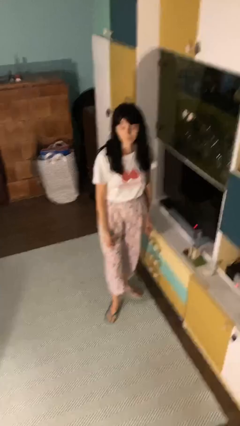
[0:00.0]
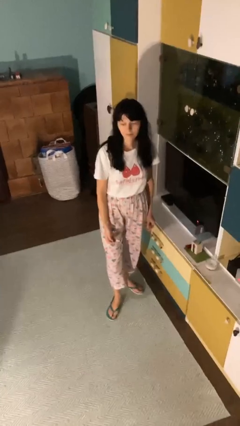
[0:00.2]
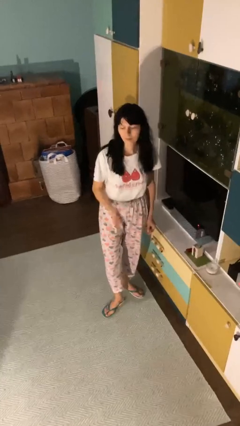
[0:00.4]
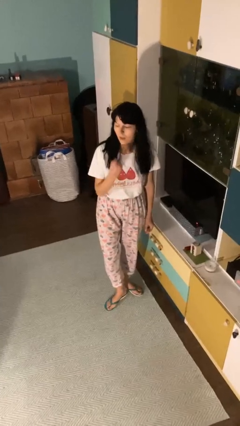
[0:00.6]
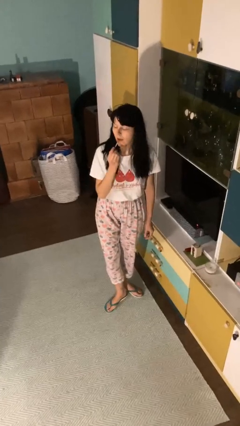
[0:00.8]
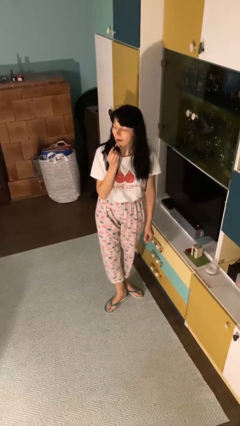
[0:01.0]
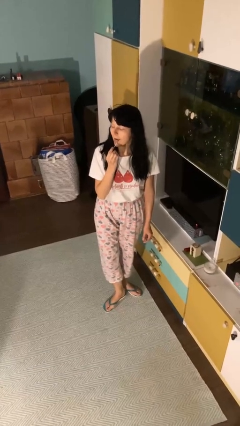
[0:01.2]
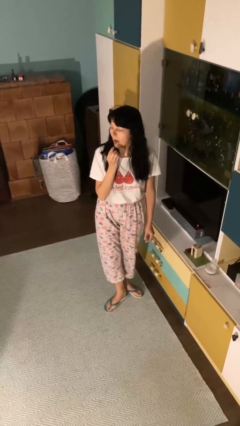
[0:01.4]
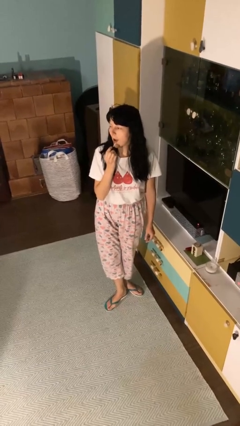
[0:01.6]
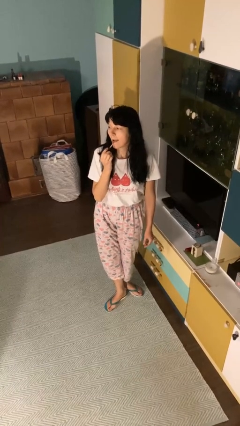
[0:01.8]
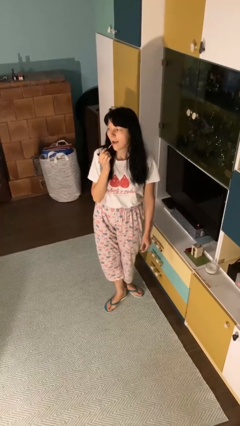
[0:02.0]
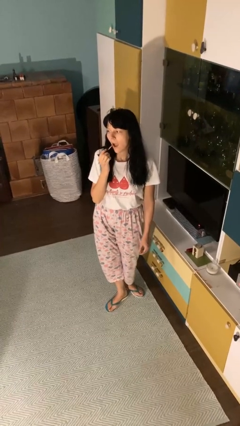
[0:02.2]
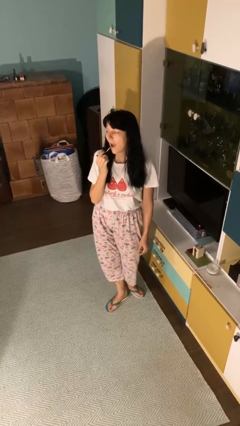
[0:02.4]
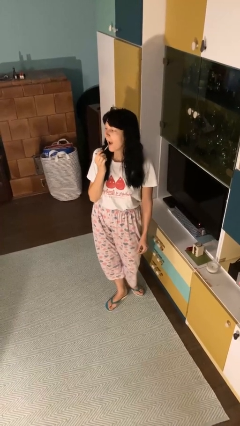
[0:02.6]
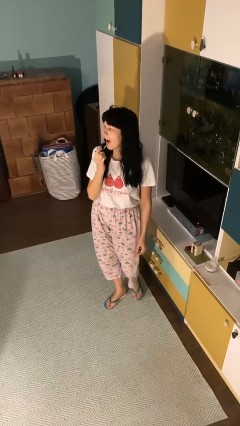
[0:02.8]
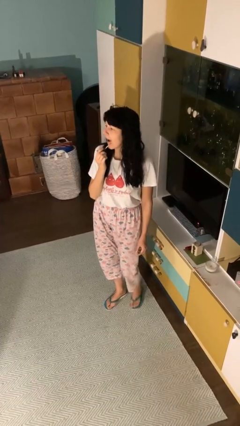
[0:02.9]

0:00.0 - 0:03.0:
person applies lip makeup

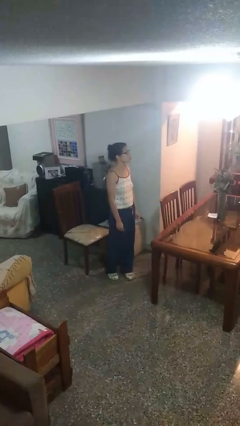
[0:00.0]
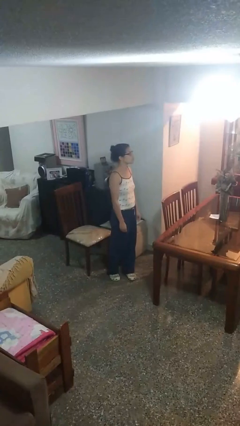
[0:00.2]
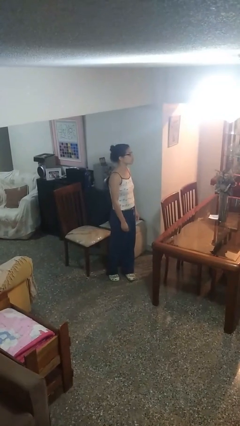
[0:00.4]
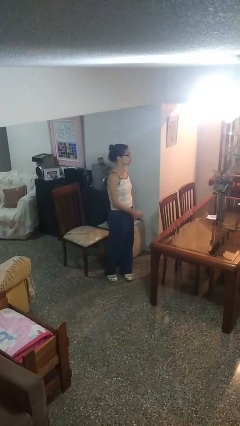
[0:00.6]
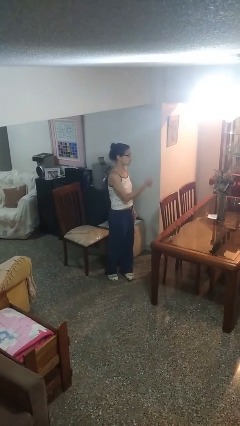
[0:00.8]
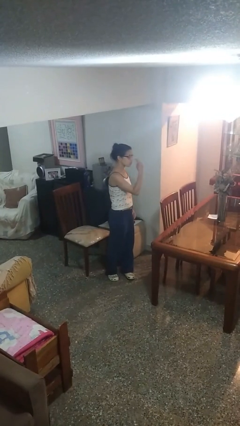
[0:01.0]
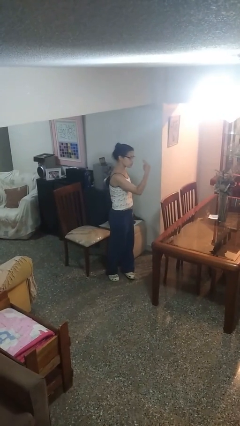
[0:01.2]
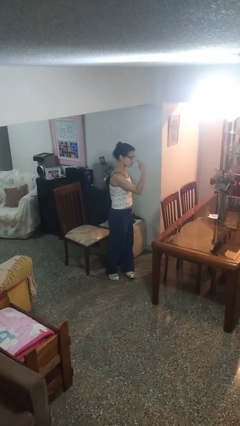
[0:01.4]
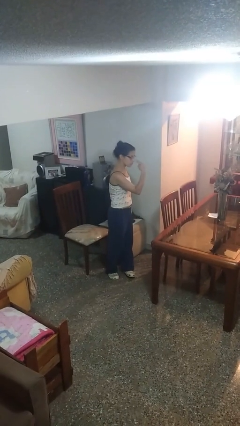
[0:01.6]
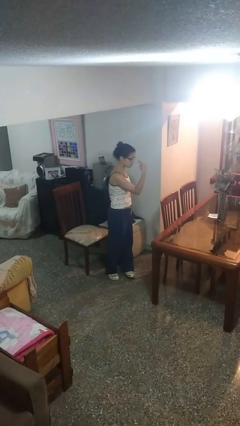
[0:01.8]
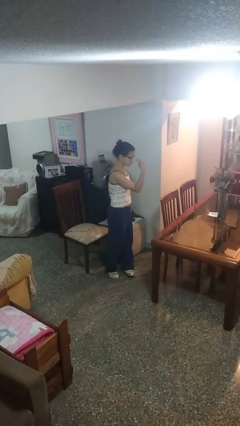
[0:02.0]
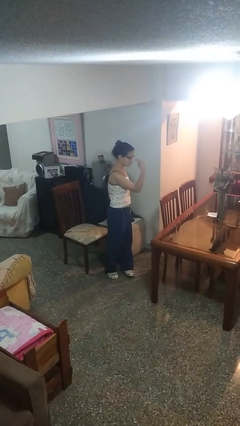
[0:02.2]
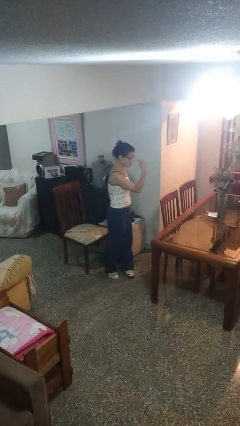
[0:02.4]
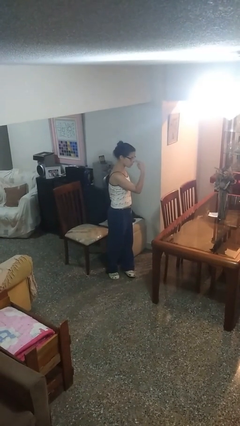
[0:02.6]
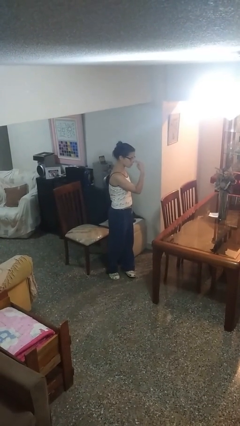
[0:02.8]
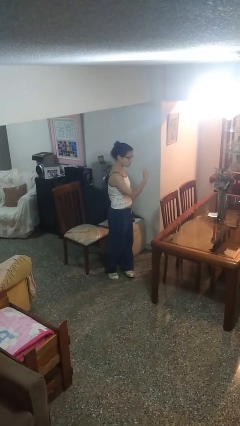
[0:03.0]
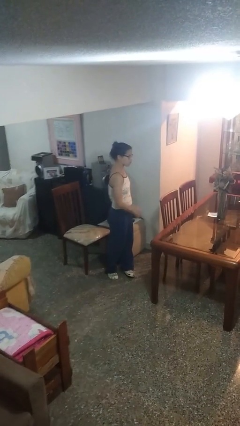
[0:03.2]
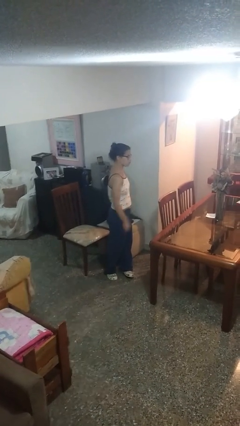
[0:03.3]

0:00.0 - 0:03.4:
person gestures watch closely

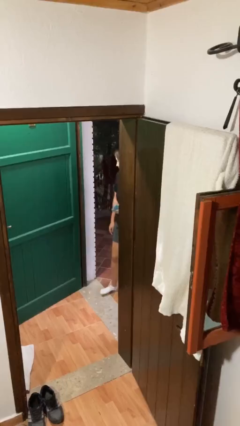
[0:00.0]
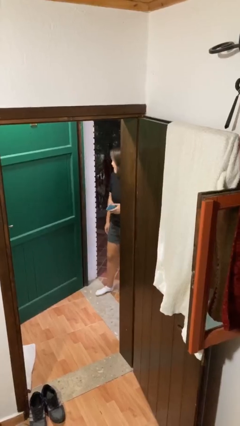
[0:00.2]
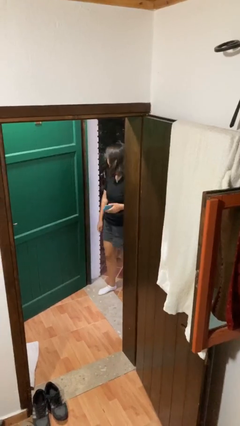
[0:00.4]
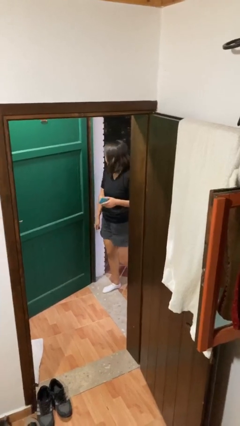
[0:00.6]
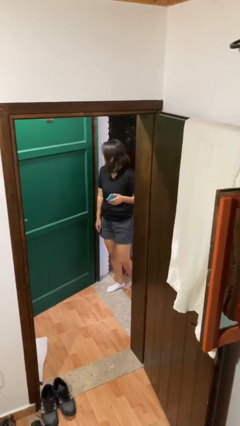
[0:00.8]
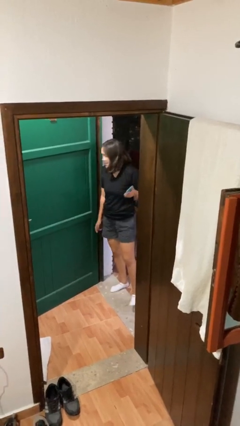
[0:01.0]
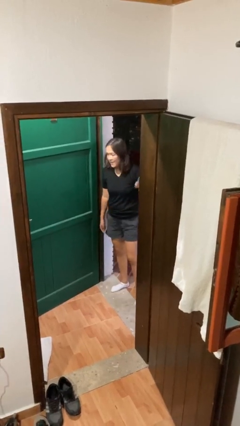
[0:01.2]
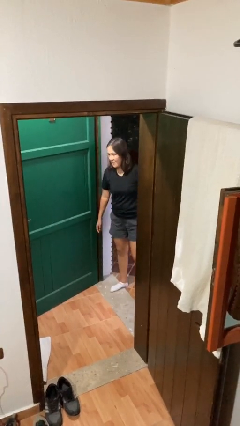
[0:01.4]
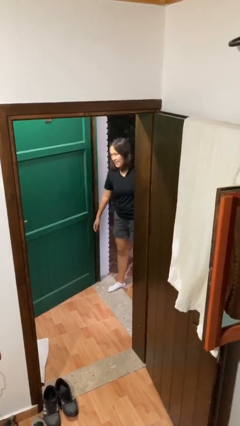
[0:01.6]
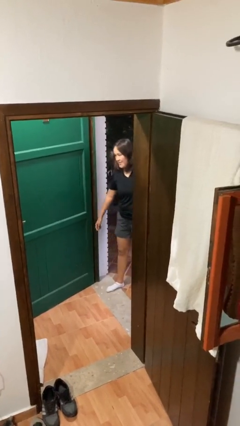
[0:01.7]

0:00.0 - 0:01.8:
person bumps into wall

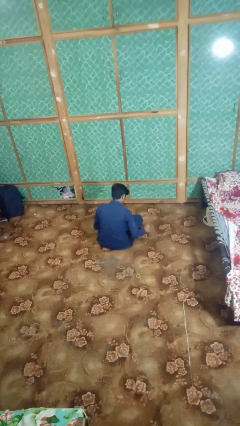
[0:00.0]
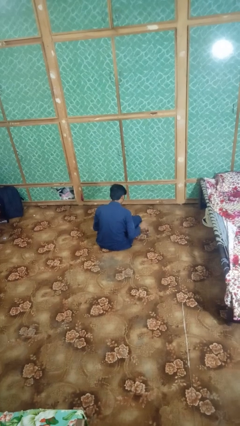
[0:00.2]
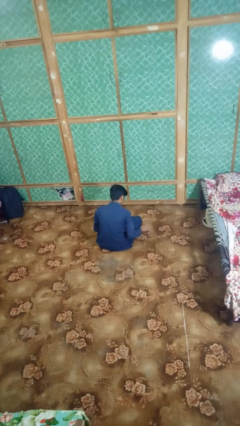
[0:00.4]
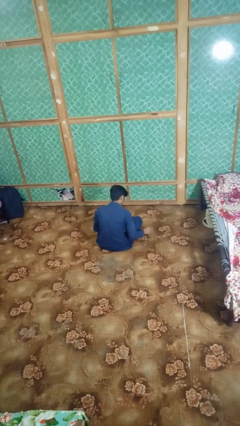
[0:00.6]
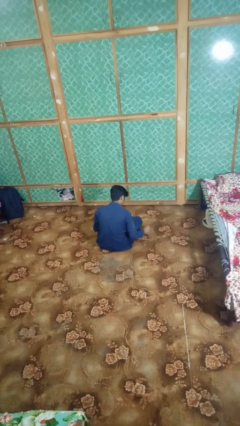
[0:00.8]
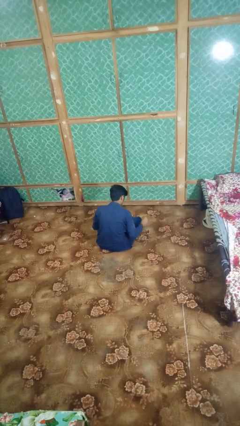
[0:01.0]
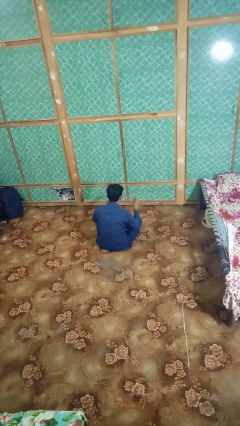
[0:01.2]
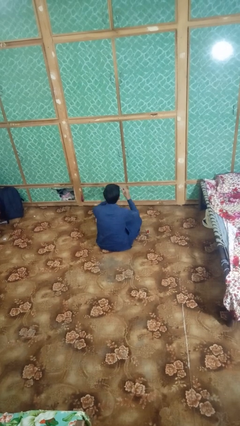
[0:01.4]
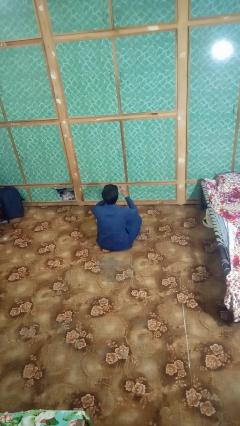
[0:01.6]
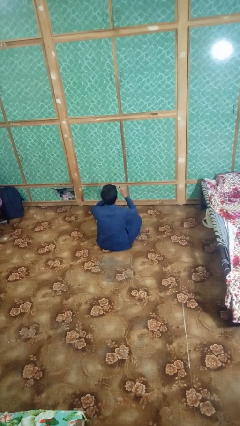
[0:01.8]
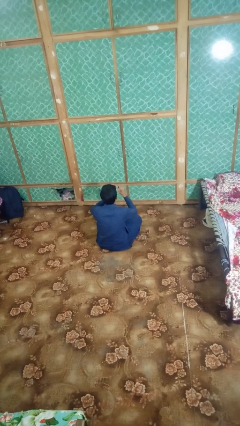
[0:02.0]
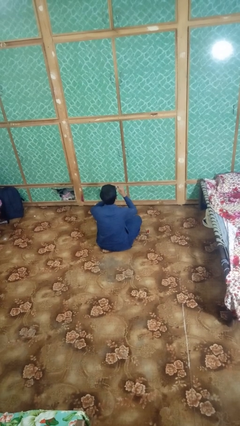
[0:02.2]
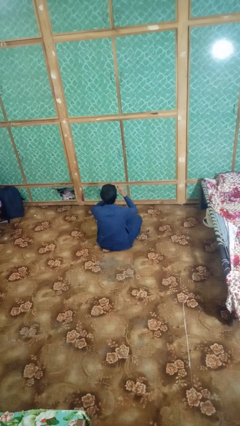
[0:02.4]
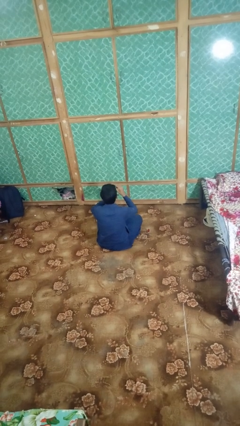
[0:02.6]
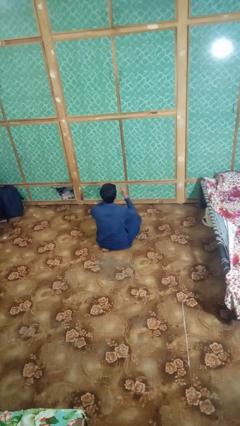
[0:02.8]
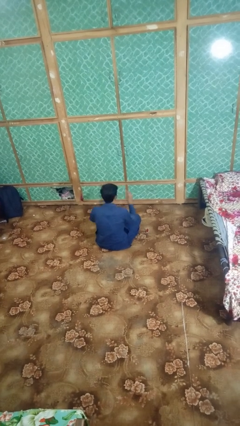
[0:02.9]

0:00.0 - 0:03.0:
person paints fingernails

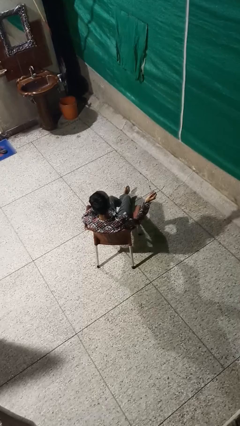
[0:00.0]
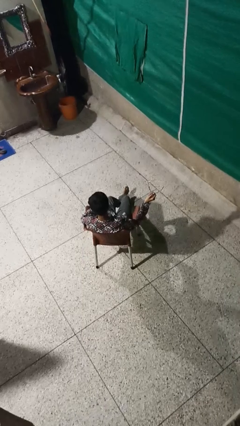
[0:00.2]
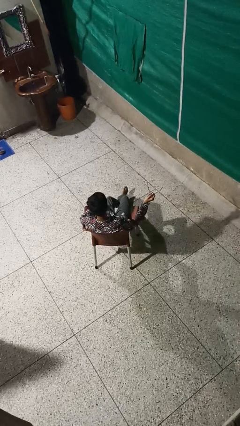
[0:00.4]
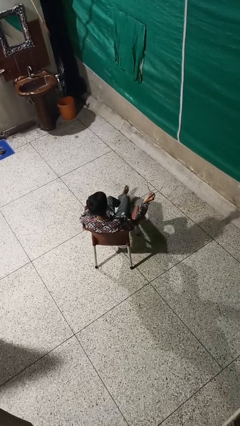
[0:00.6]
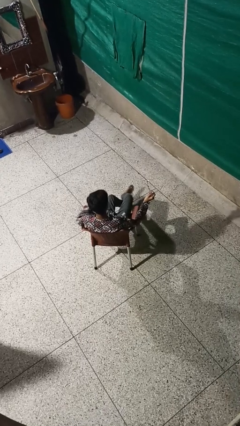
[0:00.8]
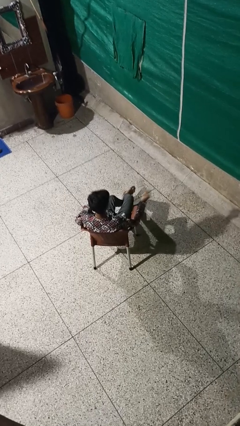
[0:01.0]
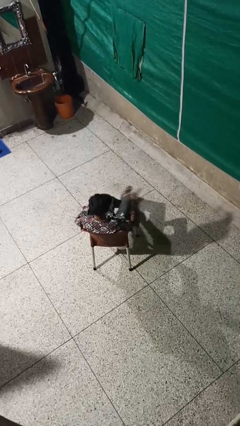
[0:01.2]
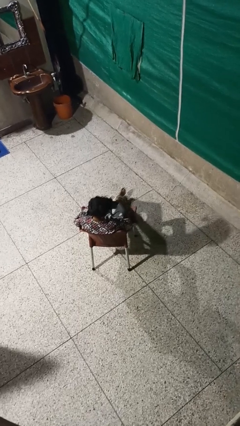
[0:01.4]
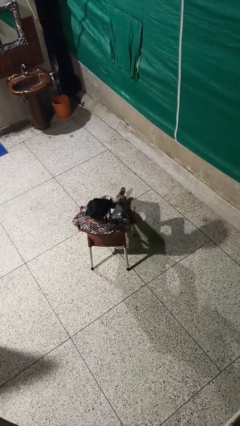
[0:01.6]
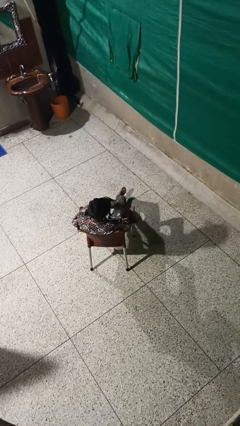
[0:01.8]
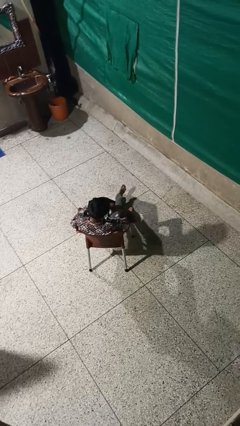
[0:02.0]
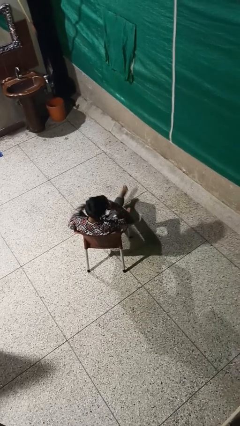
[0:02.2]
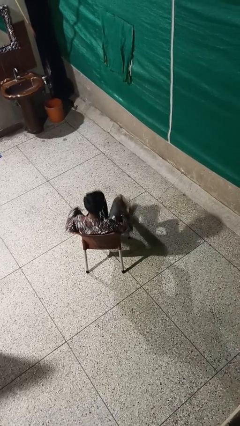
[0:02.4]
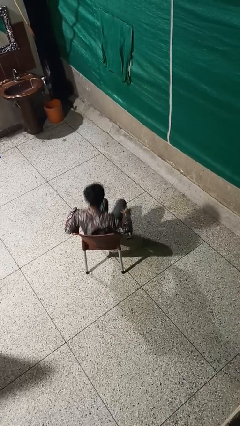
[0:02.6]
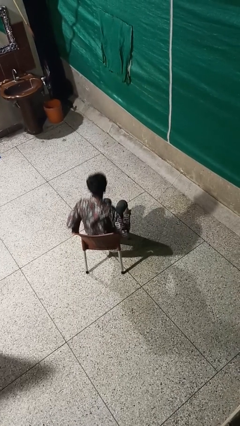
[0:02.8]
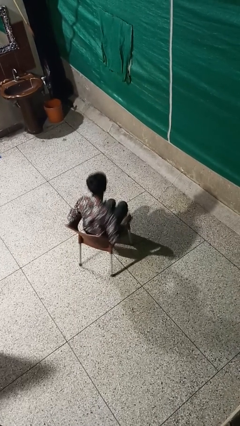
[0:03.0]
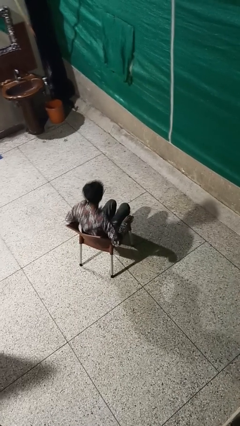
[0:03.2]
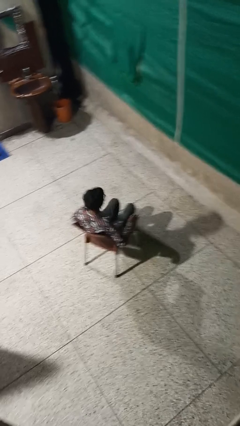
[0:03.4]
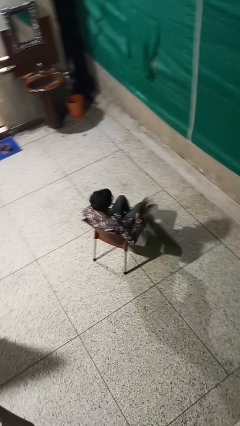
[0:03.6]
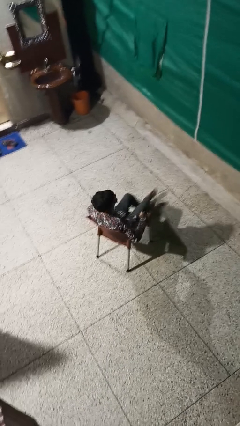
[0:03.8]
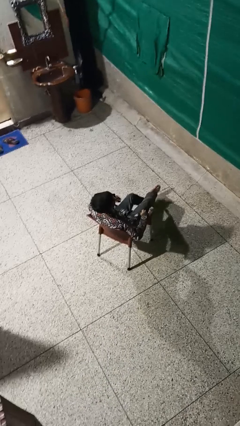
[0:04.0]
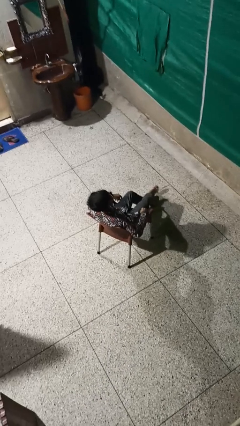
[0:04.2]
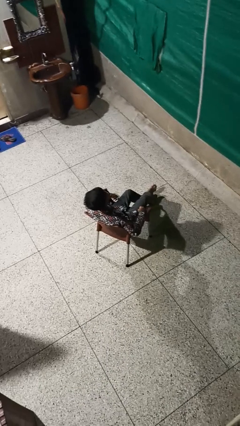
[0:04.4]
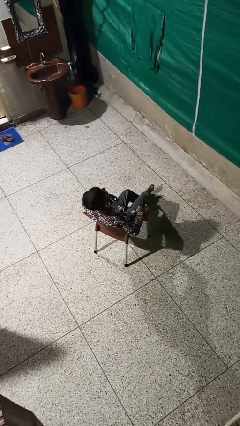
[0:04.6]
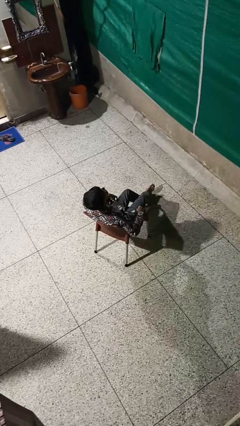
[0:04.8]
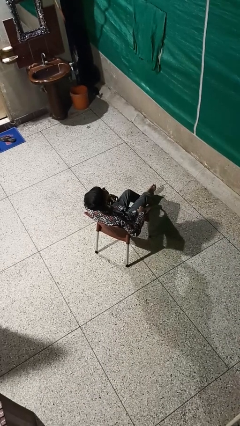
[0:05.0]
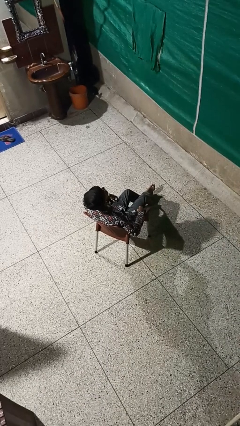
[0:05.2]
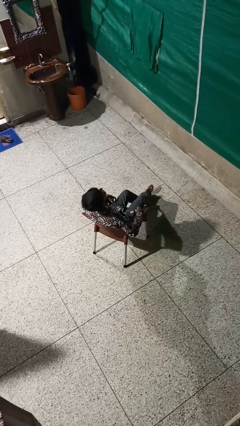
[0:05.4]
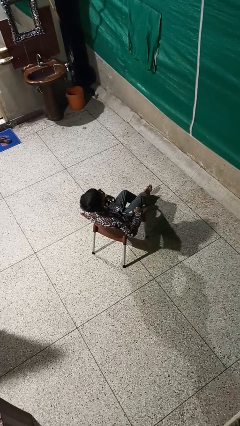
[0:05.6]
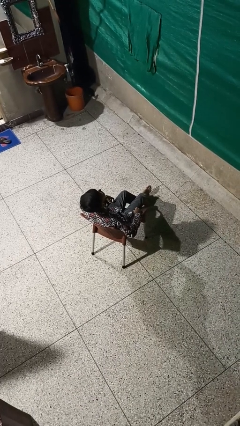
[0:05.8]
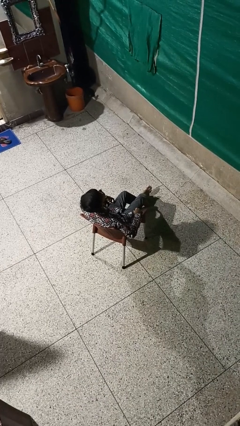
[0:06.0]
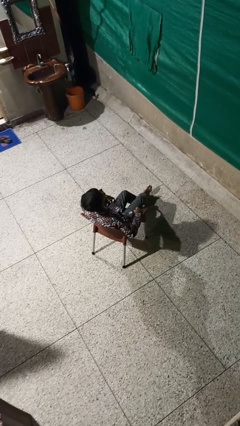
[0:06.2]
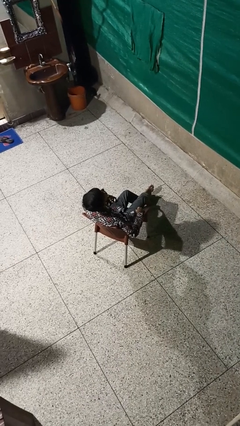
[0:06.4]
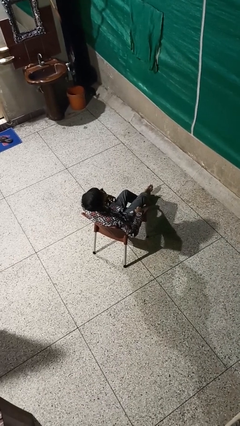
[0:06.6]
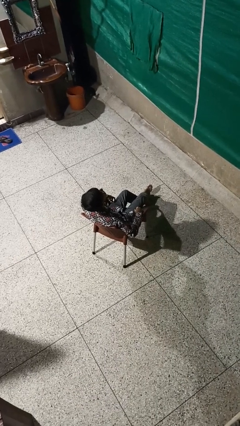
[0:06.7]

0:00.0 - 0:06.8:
person puts on glasses
